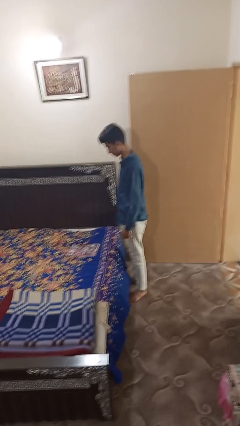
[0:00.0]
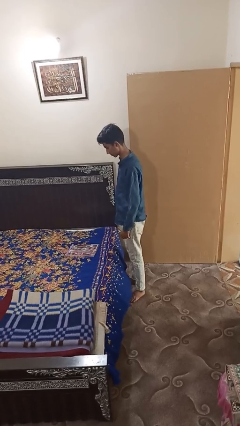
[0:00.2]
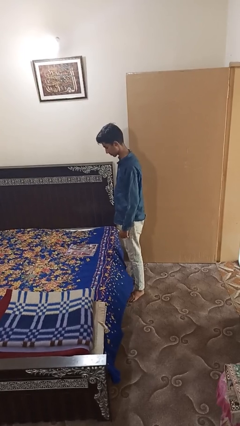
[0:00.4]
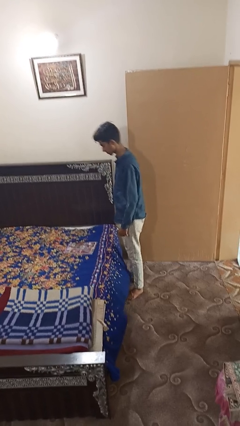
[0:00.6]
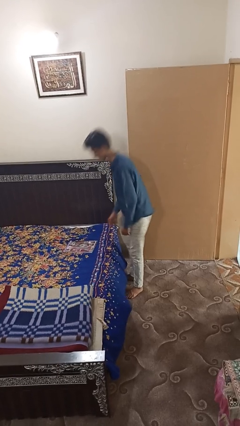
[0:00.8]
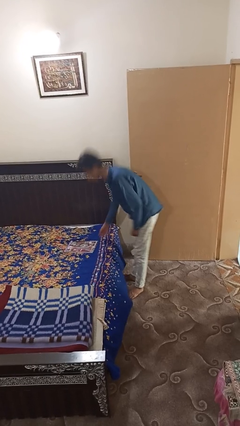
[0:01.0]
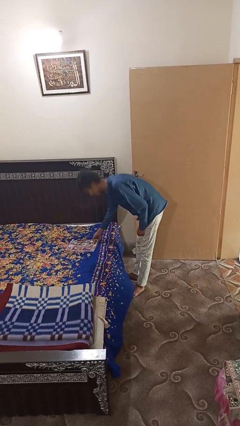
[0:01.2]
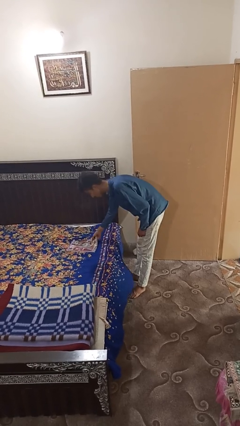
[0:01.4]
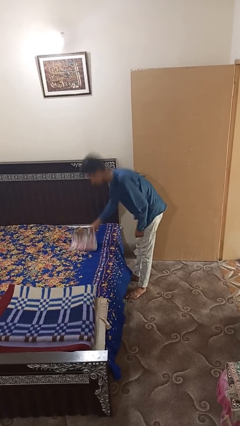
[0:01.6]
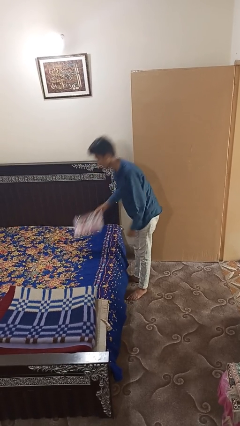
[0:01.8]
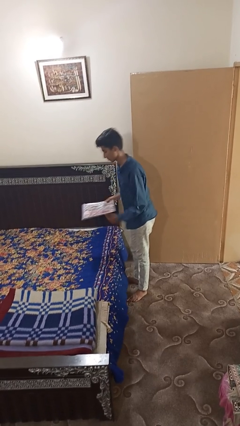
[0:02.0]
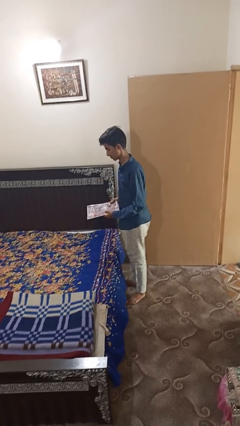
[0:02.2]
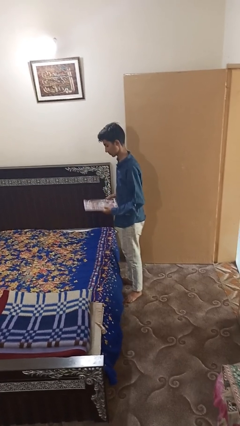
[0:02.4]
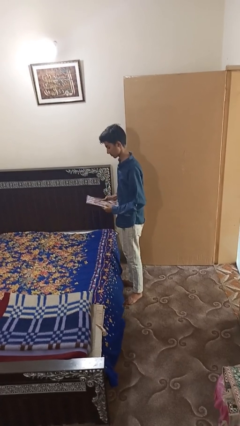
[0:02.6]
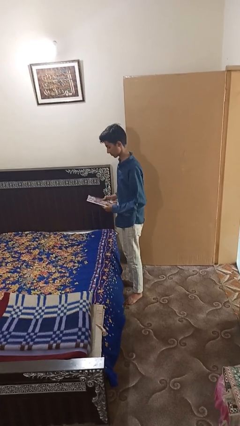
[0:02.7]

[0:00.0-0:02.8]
person picks up object from bed

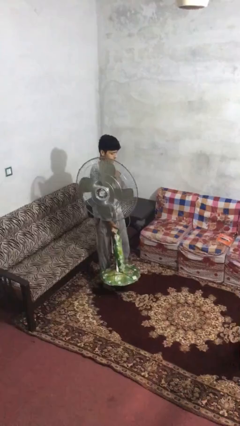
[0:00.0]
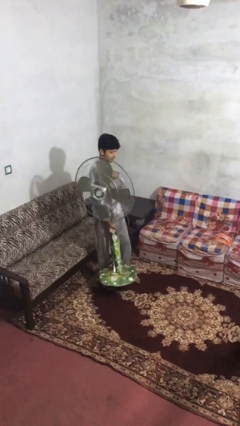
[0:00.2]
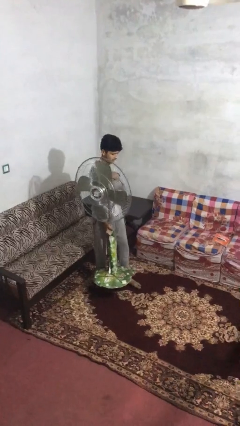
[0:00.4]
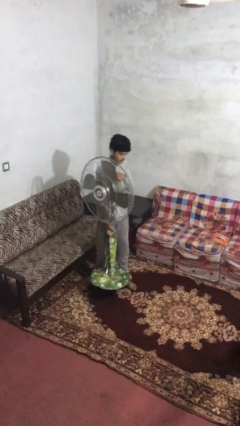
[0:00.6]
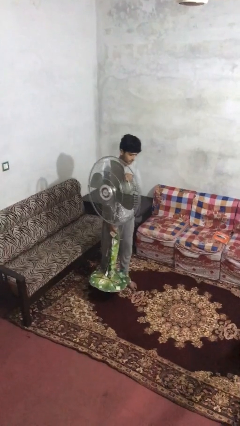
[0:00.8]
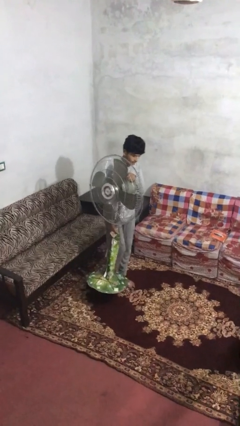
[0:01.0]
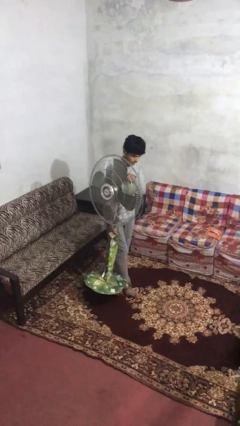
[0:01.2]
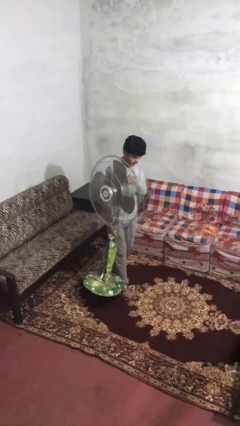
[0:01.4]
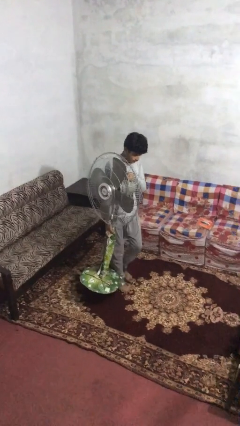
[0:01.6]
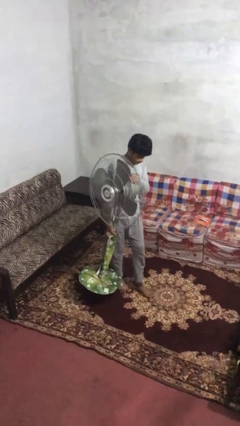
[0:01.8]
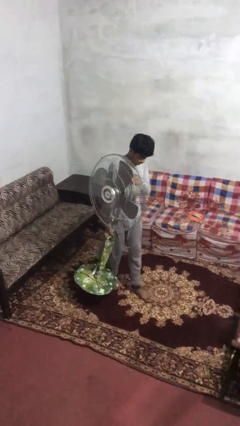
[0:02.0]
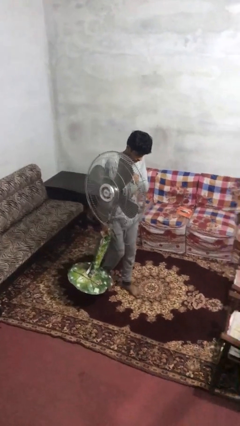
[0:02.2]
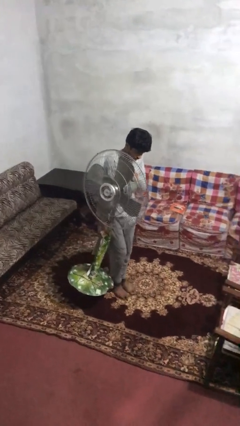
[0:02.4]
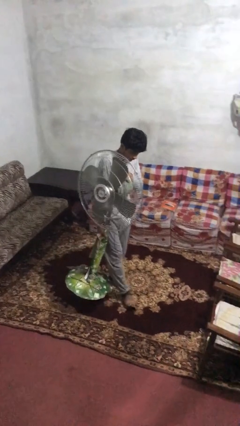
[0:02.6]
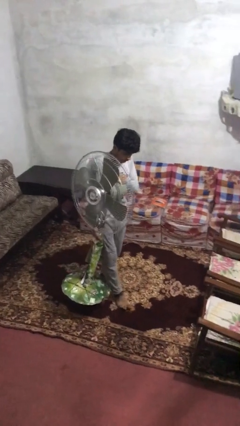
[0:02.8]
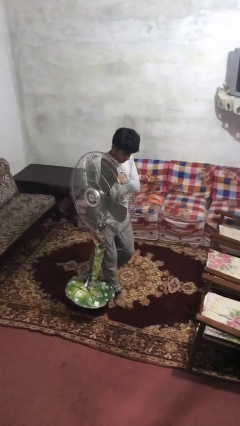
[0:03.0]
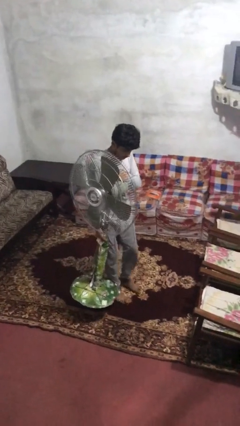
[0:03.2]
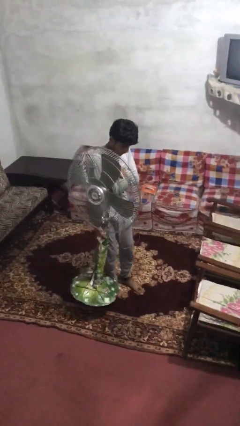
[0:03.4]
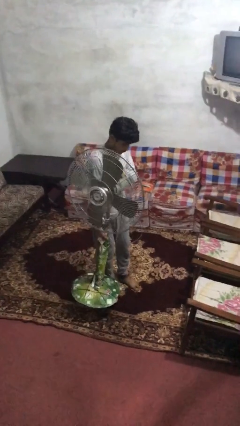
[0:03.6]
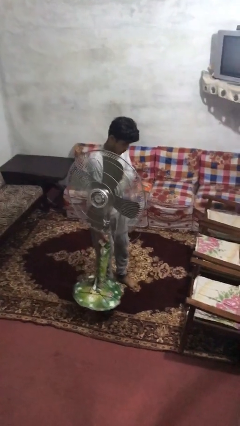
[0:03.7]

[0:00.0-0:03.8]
person carries heavy object

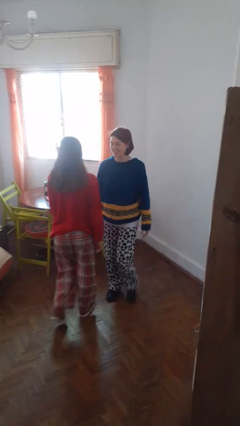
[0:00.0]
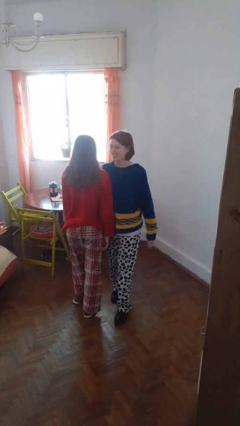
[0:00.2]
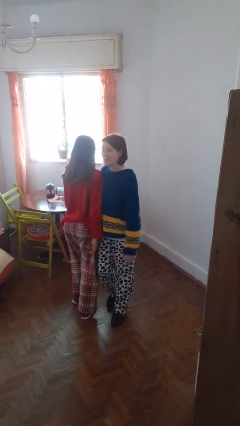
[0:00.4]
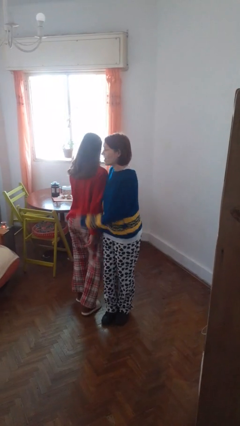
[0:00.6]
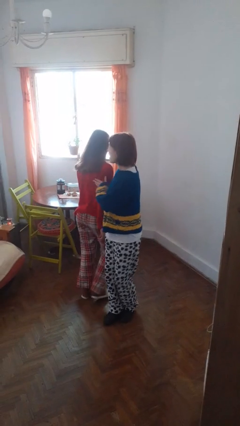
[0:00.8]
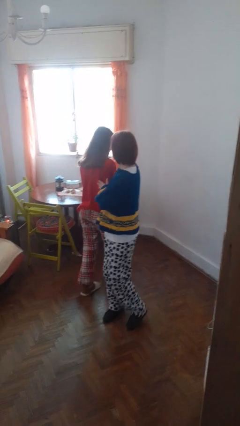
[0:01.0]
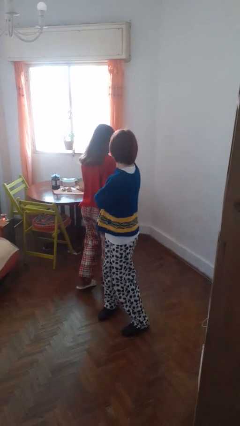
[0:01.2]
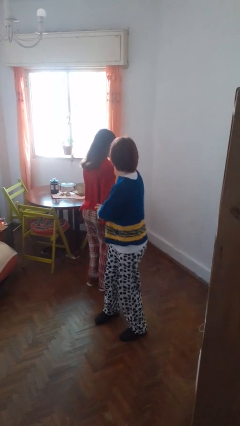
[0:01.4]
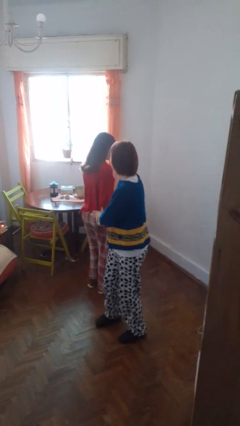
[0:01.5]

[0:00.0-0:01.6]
person bumps into person

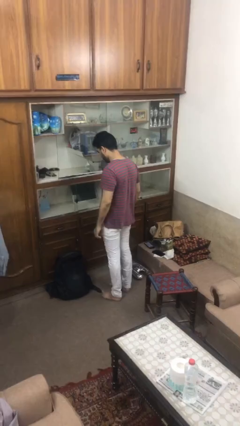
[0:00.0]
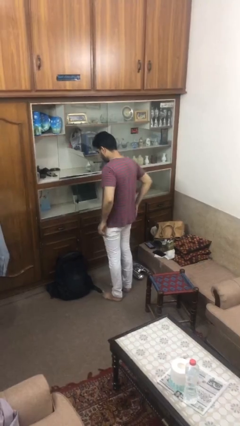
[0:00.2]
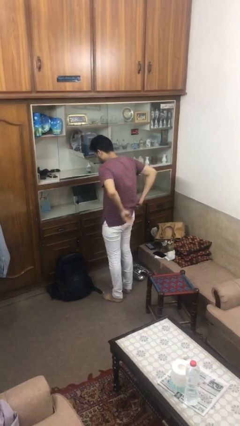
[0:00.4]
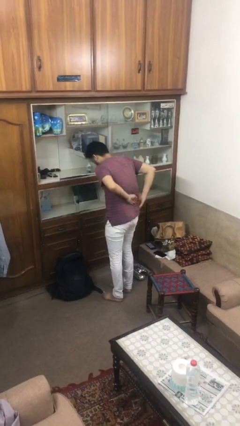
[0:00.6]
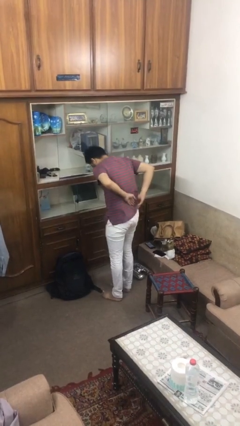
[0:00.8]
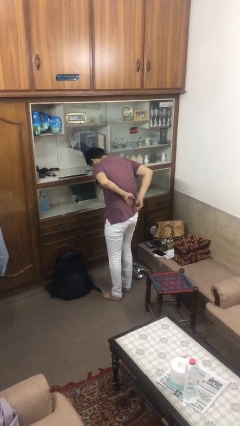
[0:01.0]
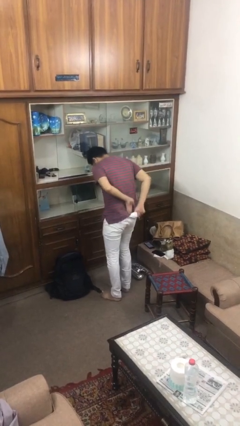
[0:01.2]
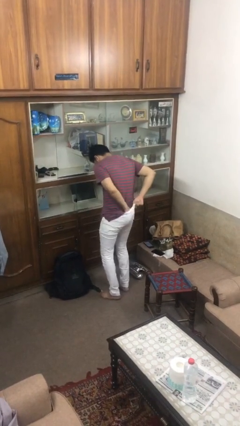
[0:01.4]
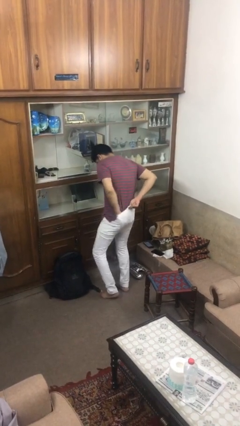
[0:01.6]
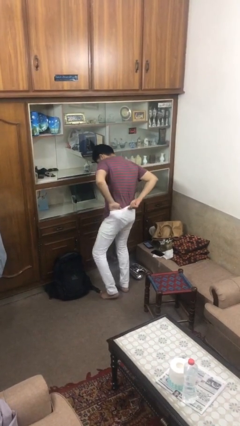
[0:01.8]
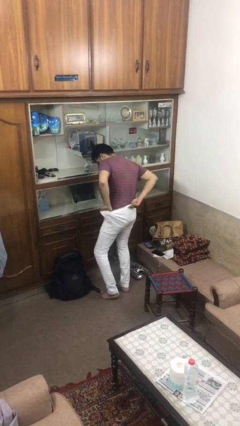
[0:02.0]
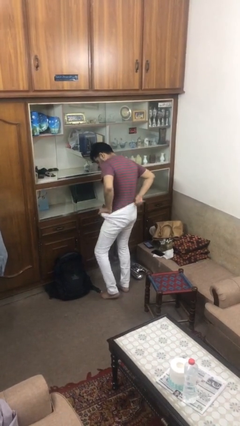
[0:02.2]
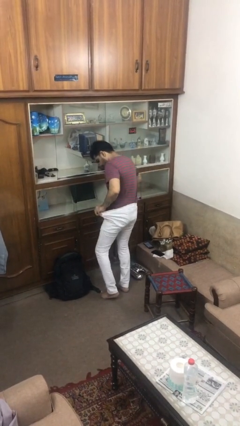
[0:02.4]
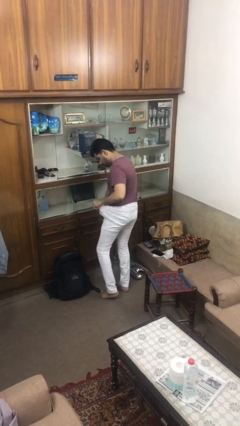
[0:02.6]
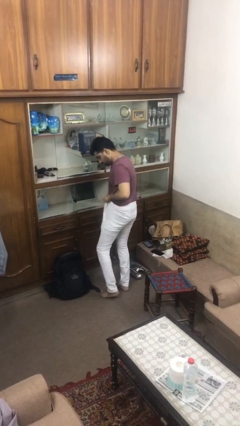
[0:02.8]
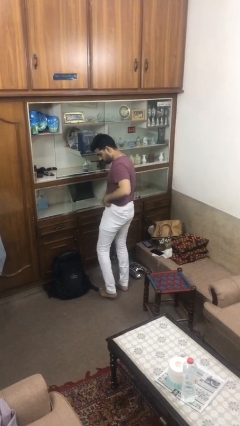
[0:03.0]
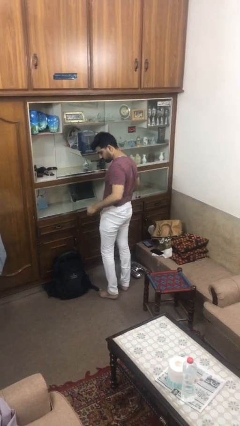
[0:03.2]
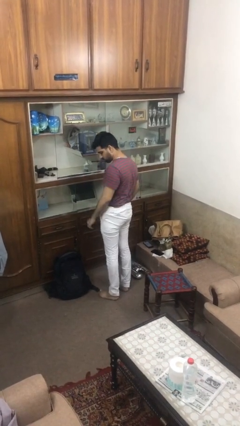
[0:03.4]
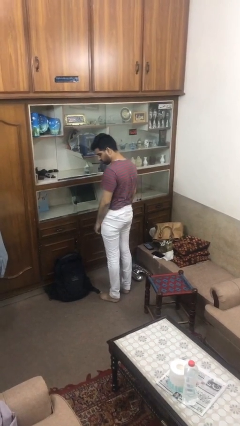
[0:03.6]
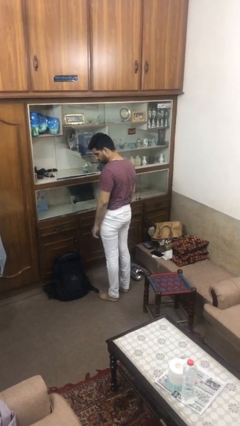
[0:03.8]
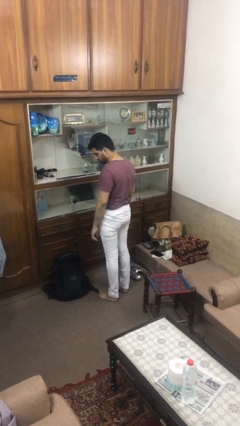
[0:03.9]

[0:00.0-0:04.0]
person tucks in shirt

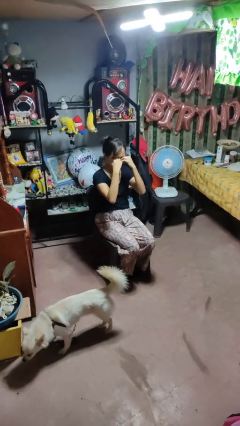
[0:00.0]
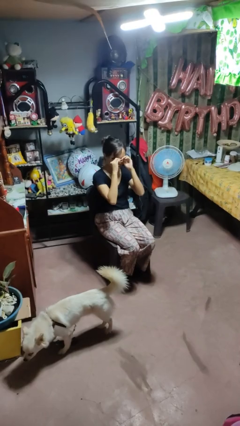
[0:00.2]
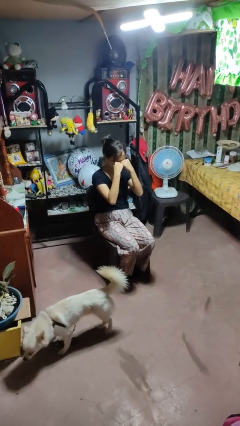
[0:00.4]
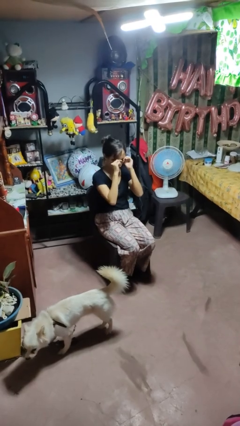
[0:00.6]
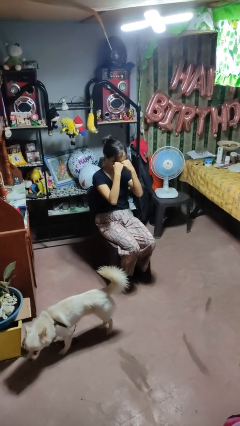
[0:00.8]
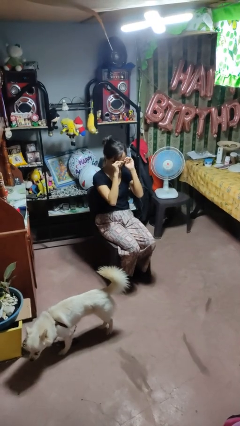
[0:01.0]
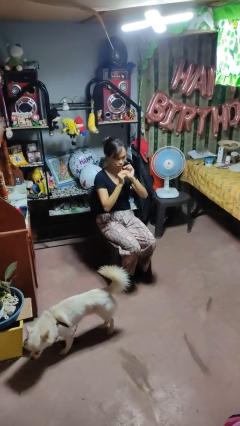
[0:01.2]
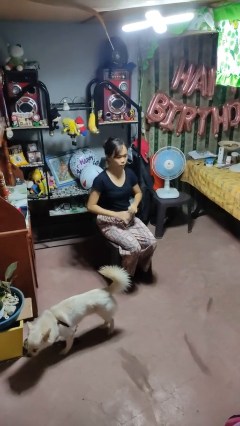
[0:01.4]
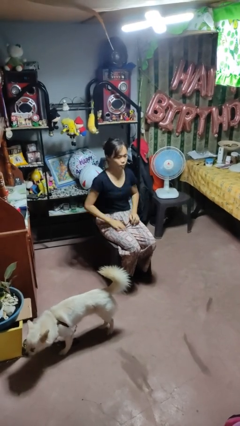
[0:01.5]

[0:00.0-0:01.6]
person rubs eyes

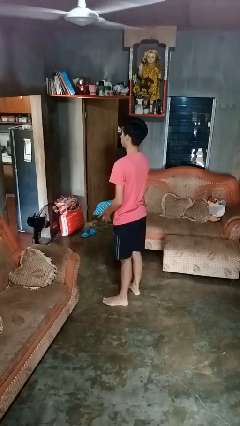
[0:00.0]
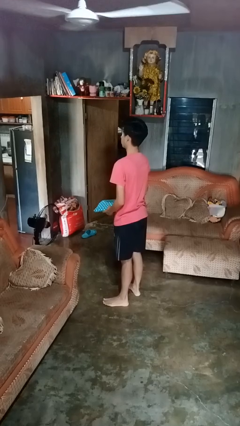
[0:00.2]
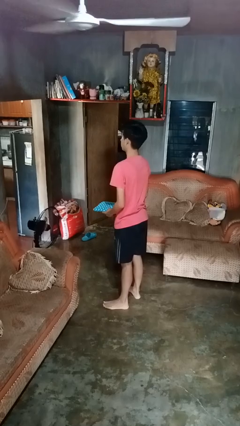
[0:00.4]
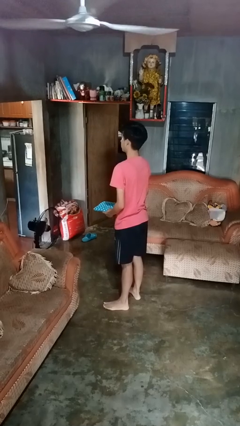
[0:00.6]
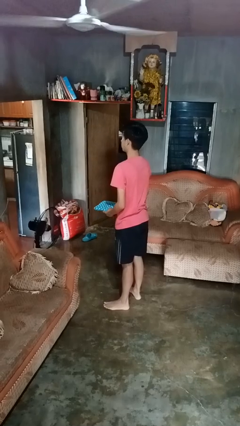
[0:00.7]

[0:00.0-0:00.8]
person catches dropped object

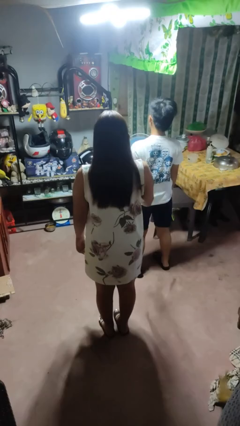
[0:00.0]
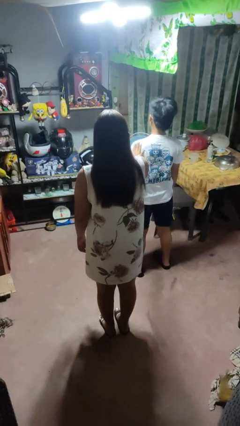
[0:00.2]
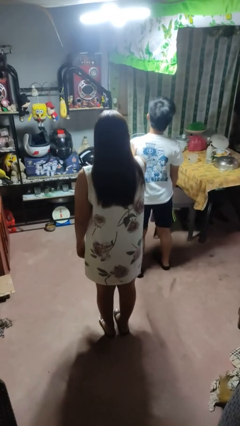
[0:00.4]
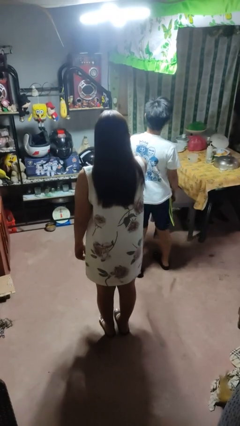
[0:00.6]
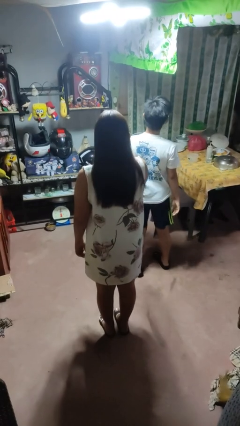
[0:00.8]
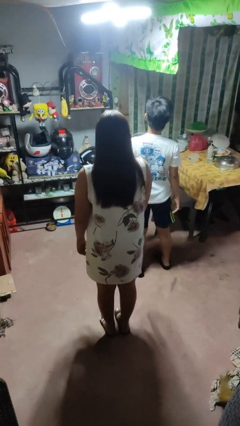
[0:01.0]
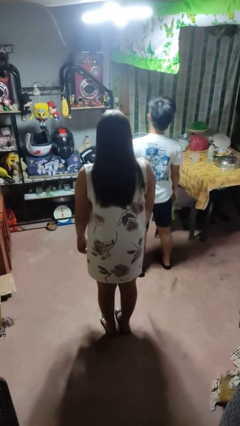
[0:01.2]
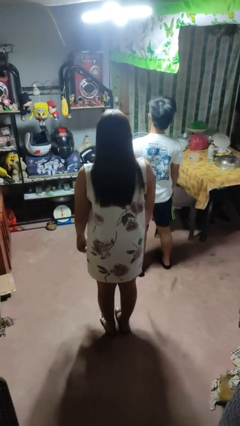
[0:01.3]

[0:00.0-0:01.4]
person shoves person

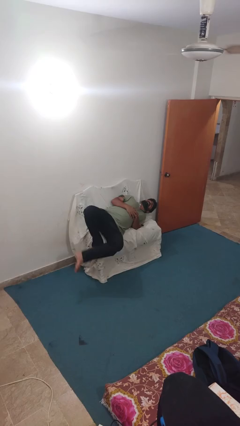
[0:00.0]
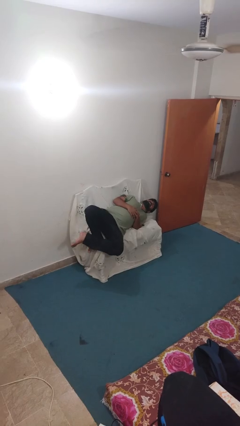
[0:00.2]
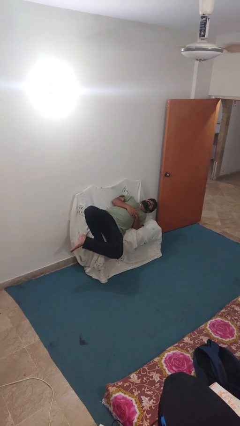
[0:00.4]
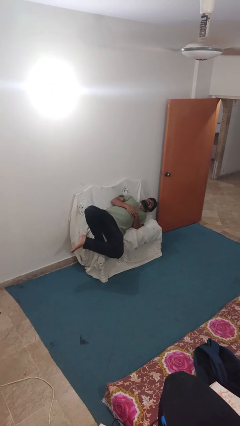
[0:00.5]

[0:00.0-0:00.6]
person stands up

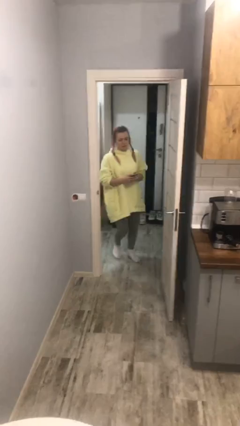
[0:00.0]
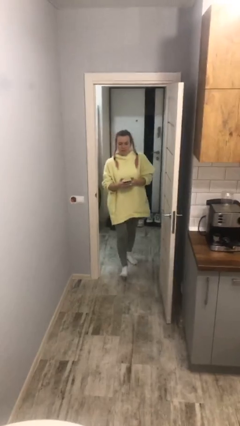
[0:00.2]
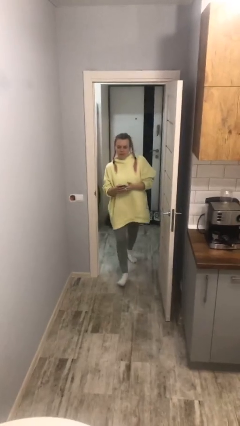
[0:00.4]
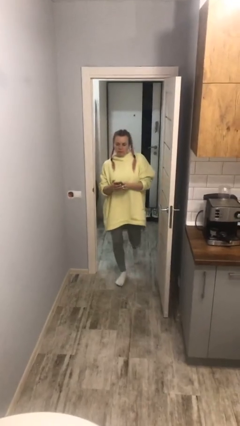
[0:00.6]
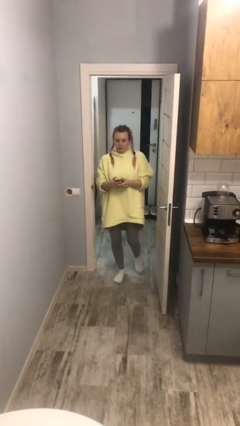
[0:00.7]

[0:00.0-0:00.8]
person enters scene through structure
